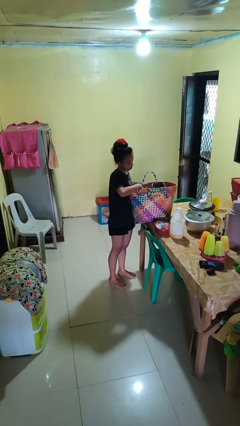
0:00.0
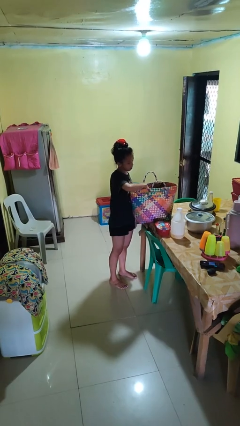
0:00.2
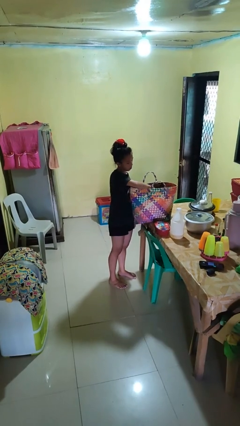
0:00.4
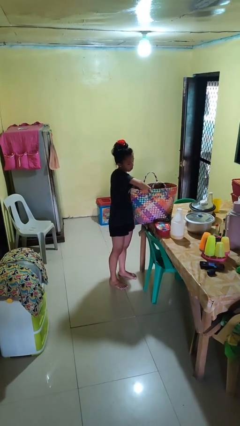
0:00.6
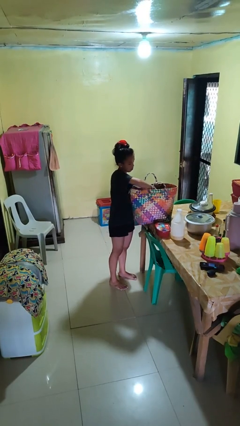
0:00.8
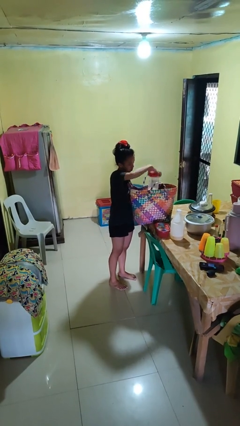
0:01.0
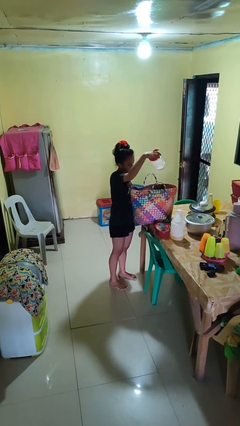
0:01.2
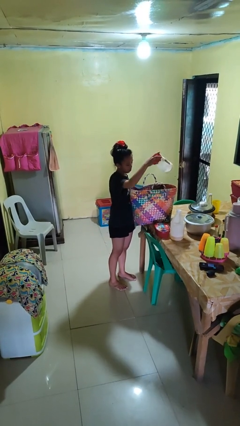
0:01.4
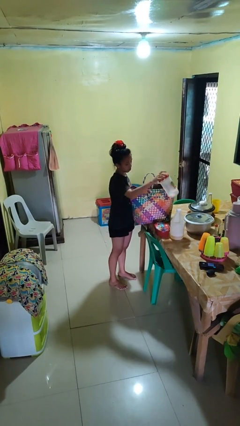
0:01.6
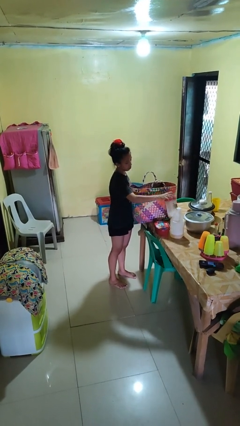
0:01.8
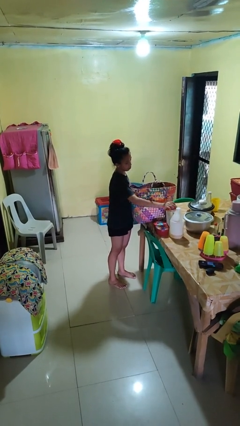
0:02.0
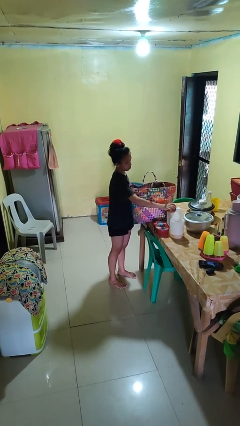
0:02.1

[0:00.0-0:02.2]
person takes object from basket

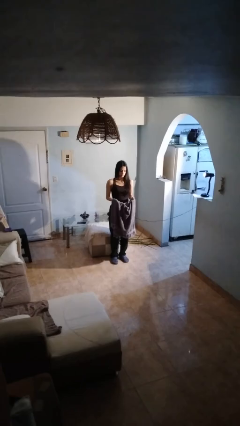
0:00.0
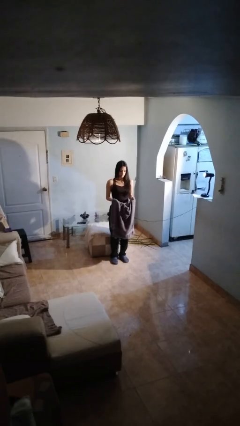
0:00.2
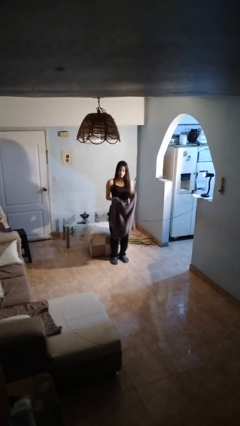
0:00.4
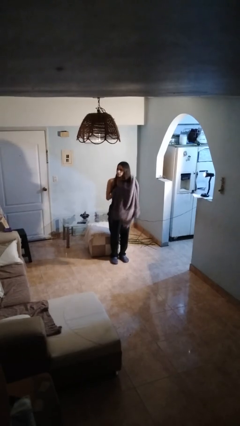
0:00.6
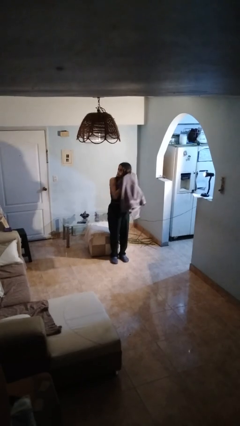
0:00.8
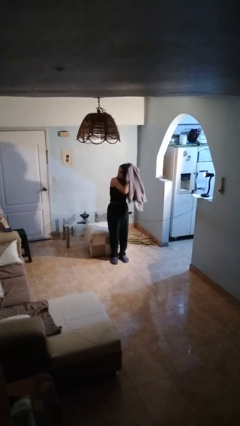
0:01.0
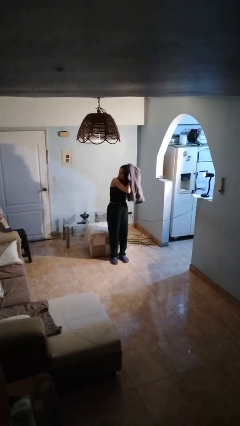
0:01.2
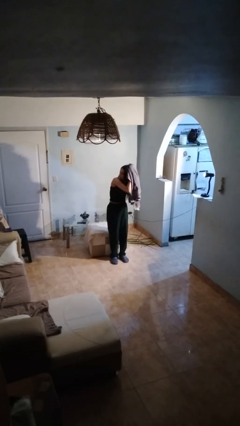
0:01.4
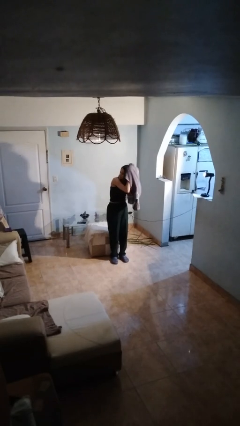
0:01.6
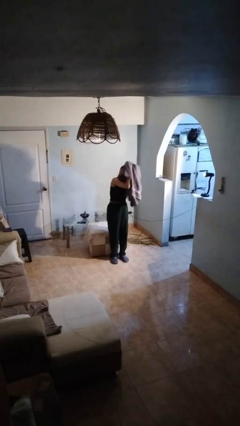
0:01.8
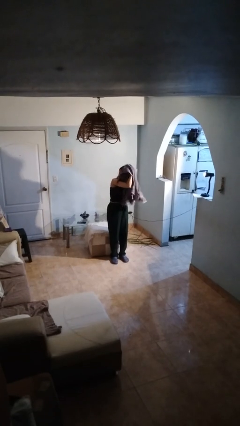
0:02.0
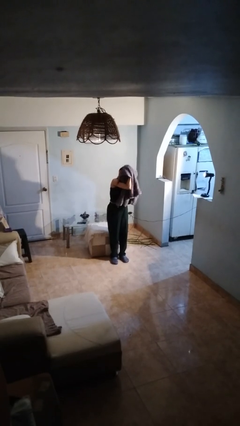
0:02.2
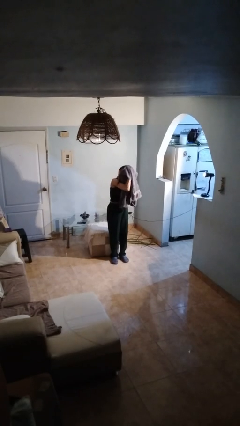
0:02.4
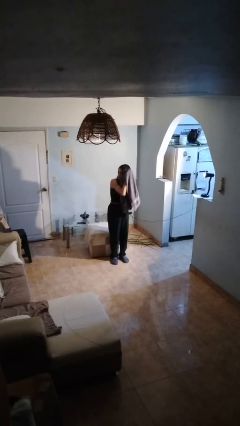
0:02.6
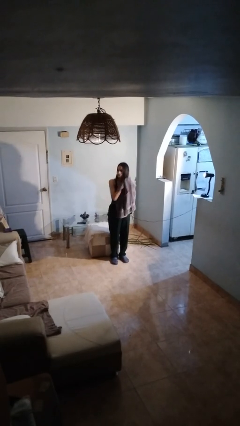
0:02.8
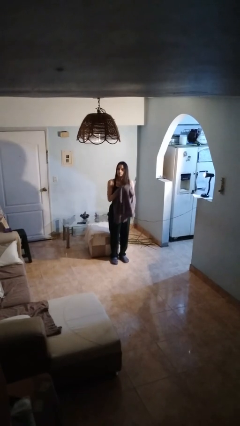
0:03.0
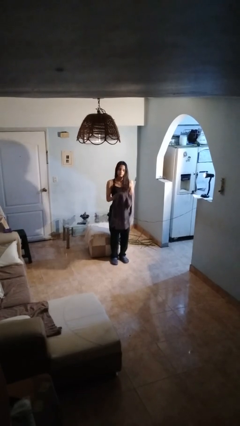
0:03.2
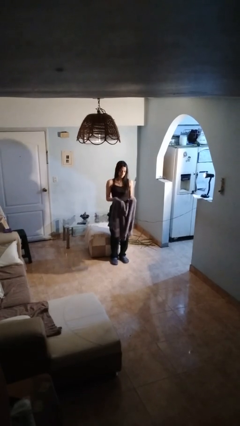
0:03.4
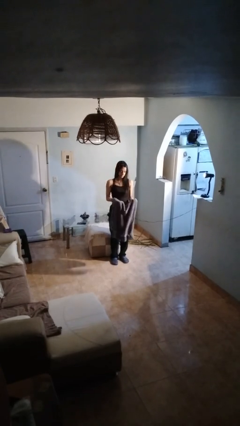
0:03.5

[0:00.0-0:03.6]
person dries hair with towel

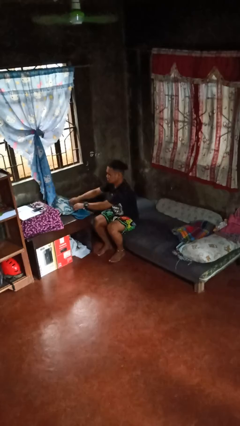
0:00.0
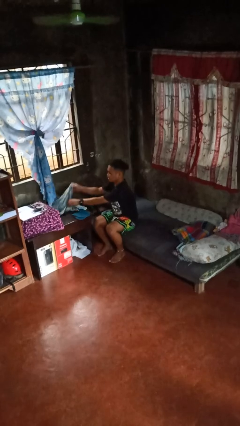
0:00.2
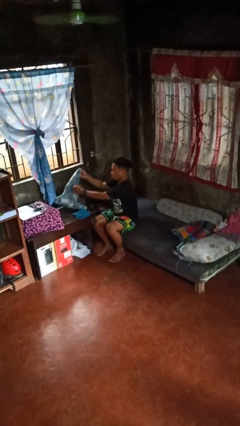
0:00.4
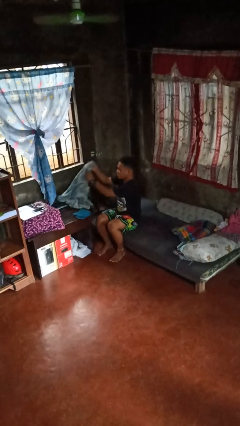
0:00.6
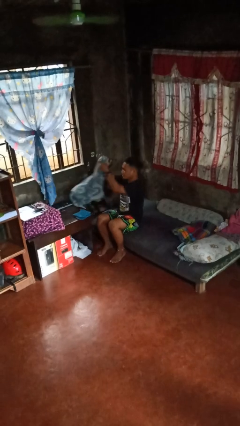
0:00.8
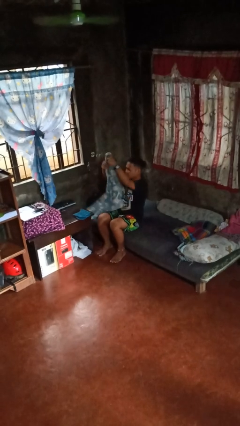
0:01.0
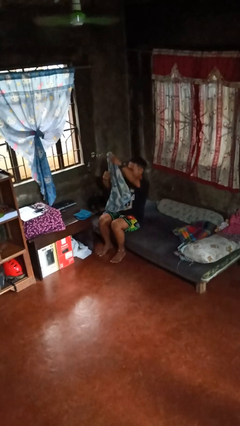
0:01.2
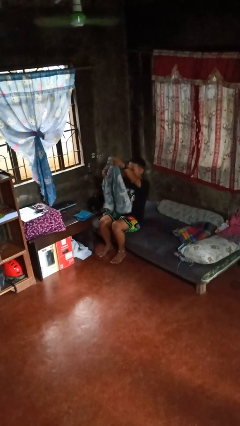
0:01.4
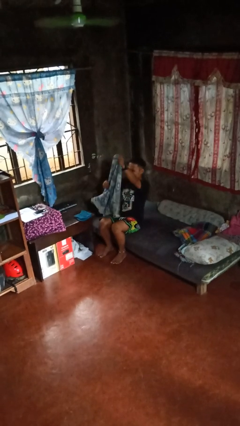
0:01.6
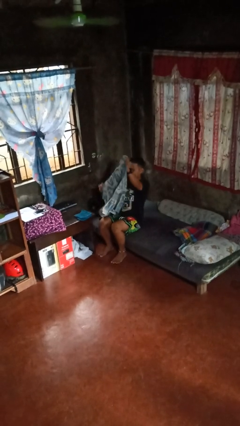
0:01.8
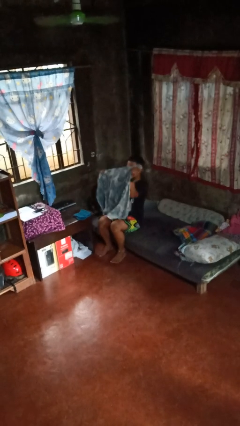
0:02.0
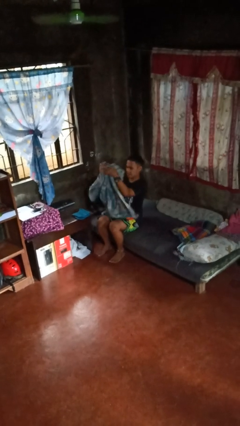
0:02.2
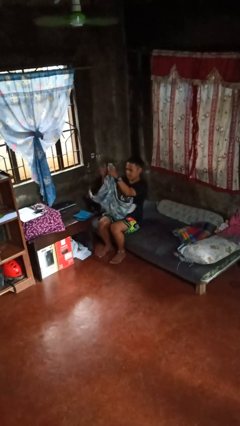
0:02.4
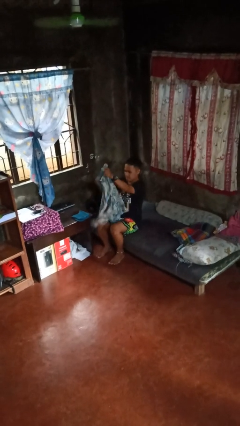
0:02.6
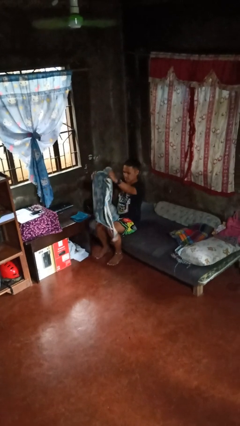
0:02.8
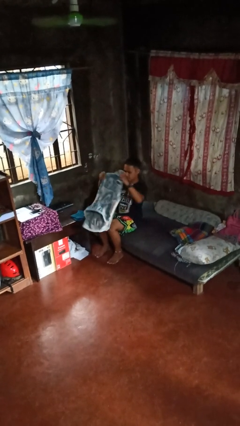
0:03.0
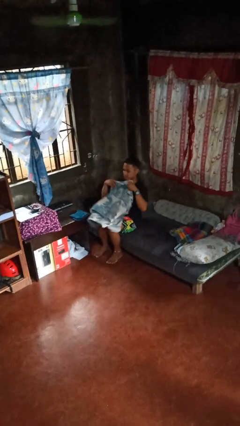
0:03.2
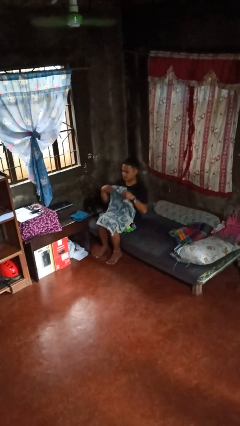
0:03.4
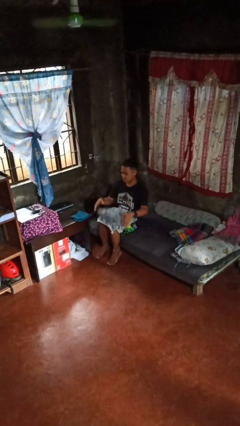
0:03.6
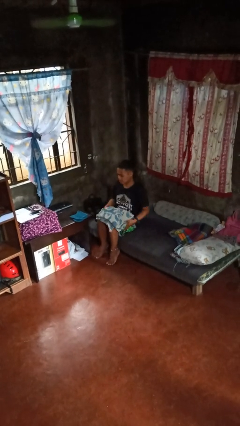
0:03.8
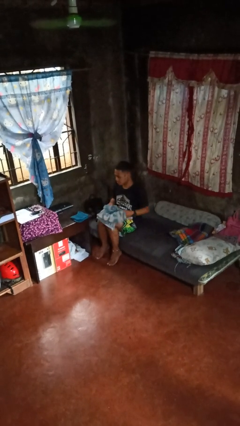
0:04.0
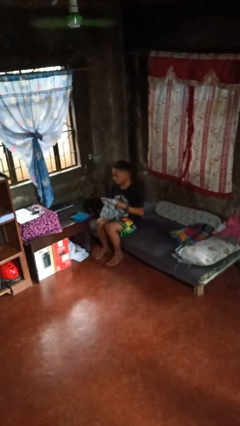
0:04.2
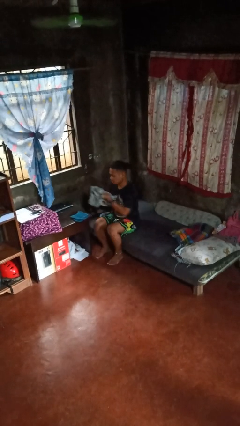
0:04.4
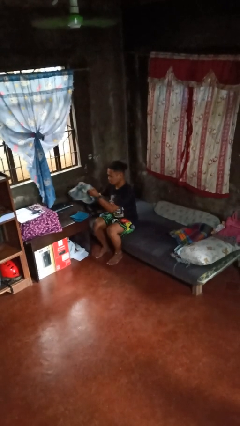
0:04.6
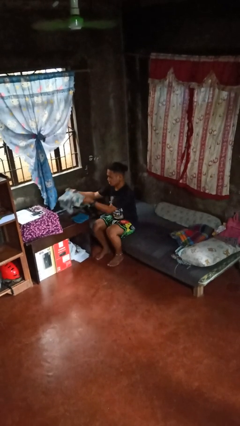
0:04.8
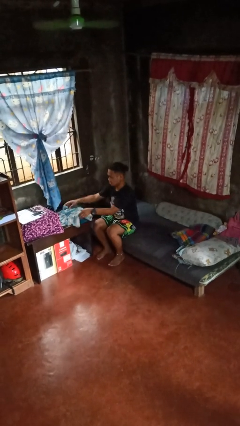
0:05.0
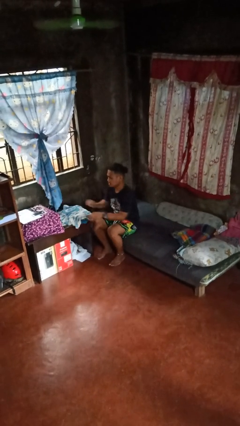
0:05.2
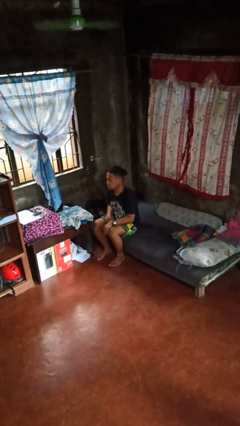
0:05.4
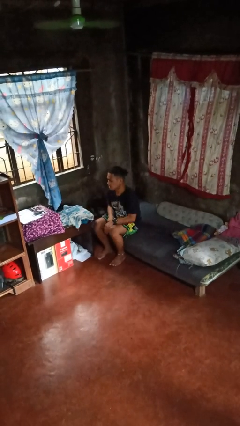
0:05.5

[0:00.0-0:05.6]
person folds towel

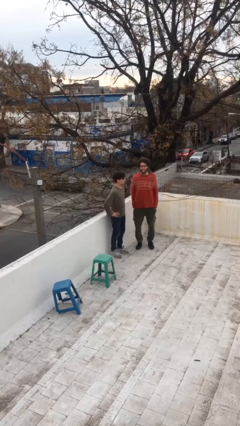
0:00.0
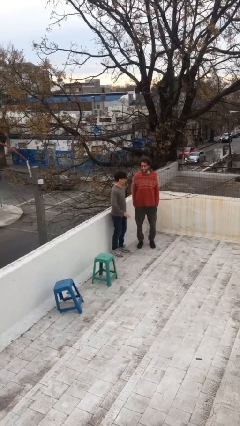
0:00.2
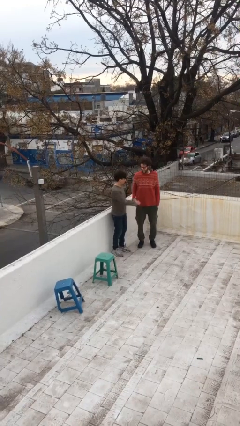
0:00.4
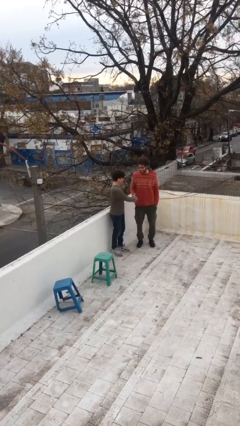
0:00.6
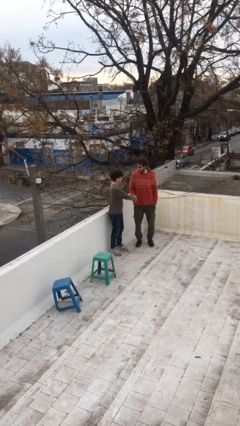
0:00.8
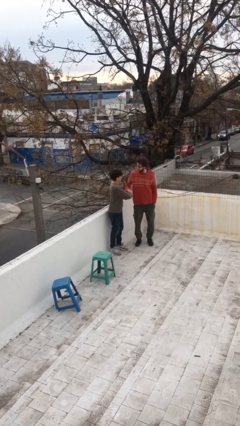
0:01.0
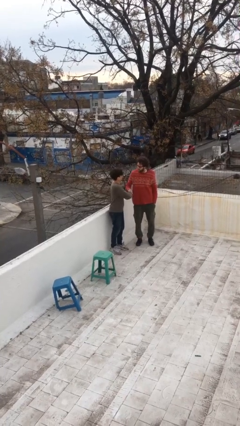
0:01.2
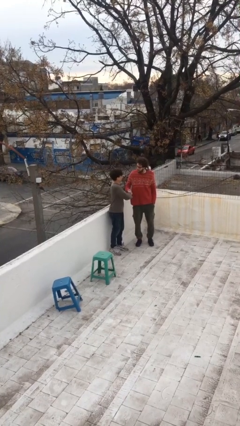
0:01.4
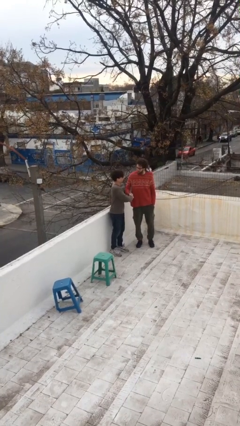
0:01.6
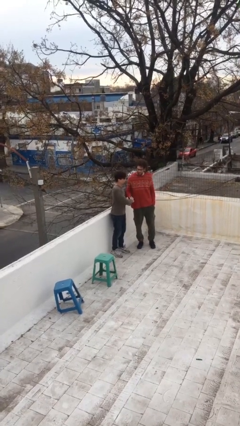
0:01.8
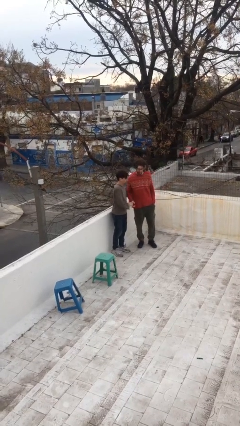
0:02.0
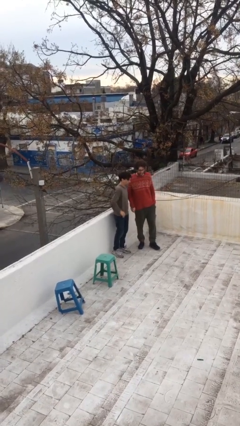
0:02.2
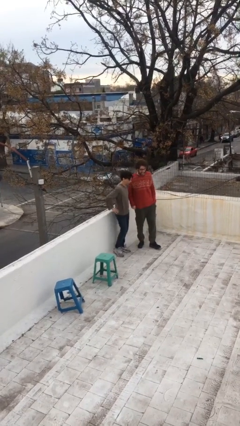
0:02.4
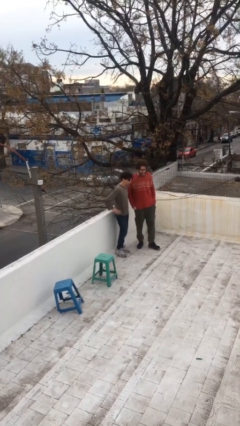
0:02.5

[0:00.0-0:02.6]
person shakes hand

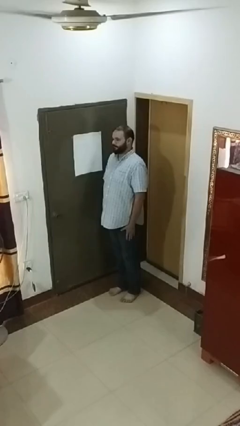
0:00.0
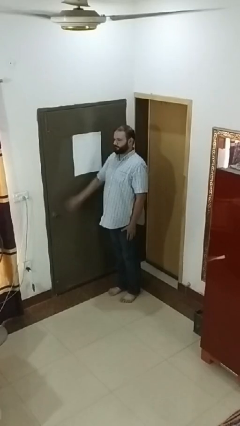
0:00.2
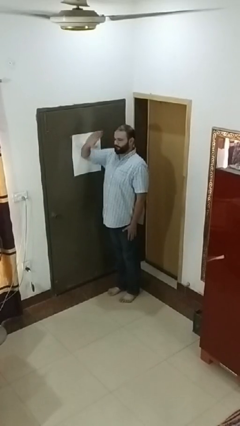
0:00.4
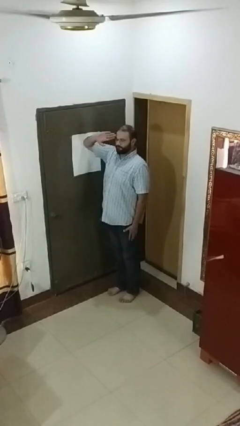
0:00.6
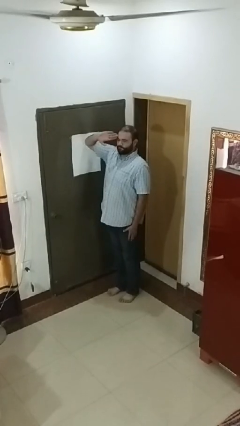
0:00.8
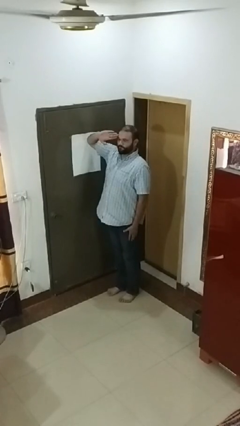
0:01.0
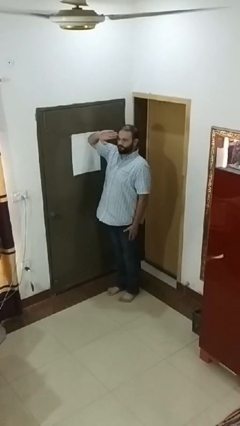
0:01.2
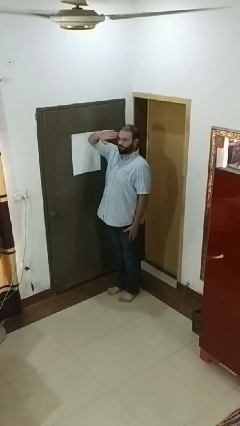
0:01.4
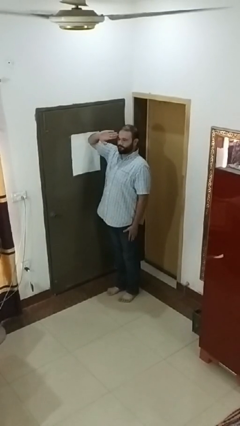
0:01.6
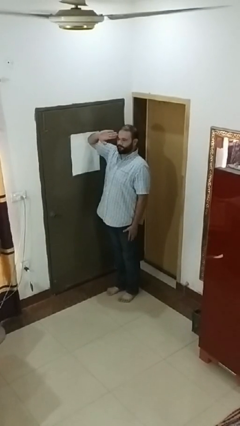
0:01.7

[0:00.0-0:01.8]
person salutes

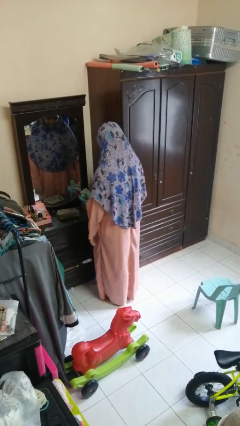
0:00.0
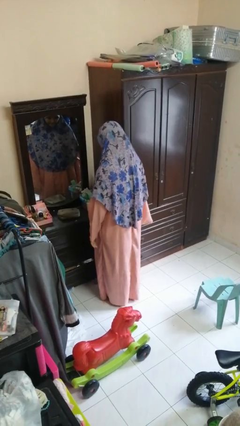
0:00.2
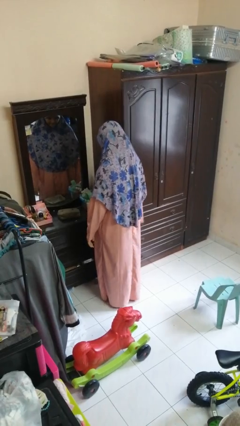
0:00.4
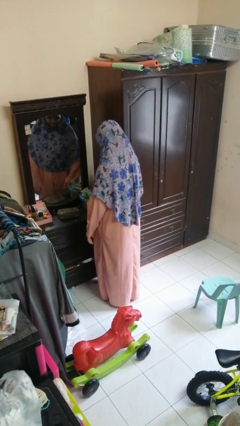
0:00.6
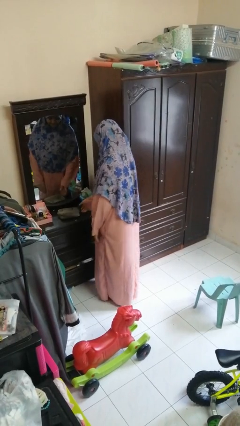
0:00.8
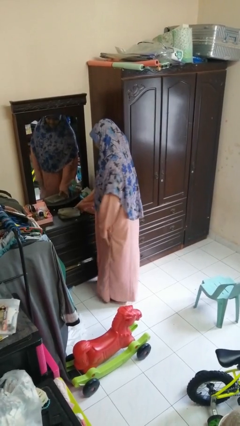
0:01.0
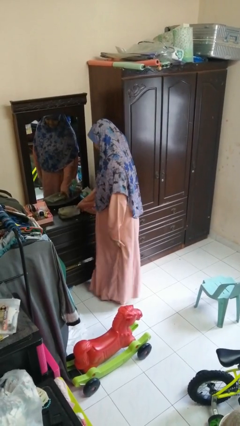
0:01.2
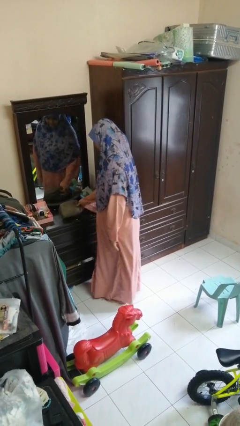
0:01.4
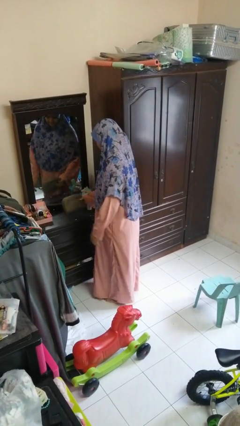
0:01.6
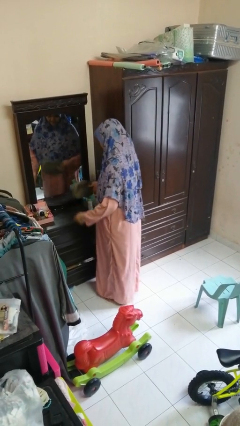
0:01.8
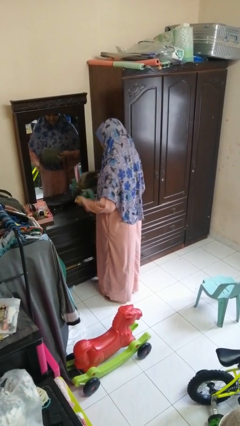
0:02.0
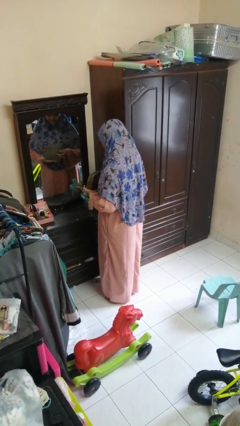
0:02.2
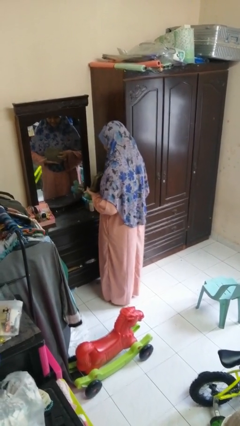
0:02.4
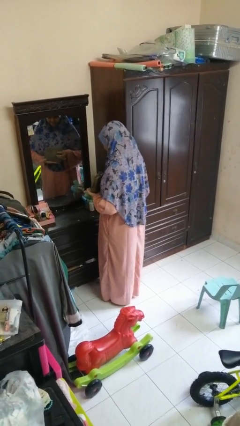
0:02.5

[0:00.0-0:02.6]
person picks up object from countertop
